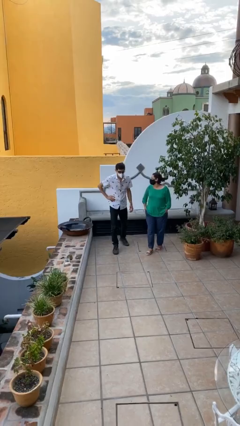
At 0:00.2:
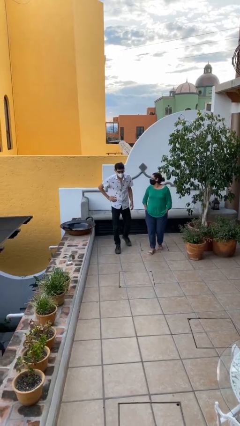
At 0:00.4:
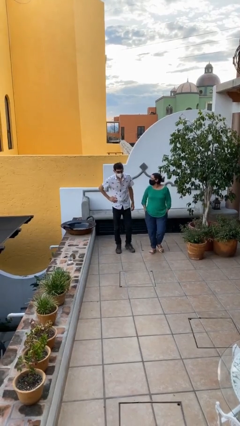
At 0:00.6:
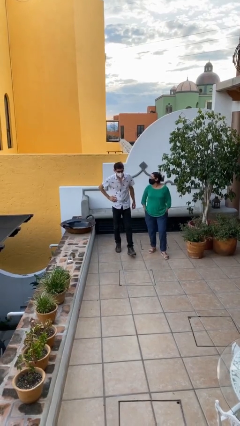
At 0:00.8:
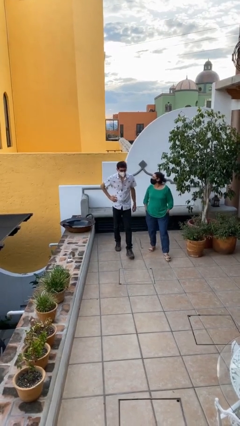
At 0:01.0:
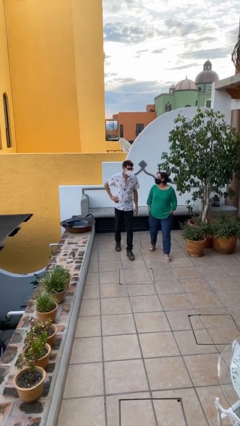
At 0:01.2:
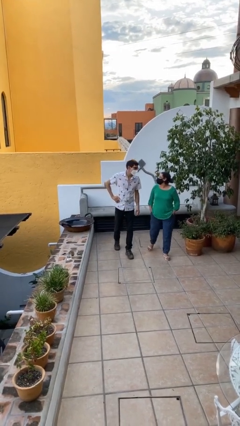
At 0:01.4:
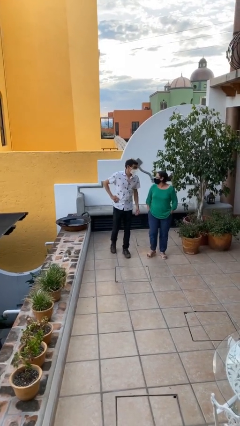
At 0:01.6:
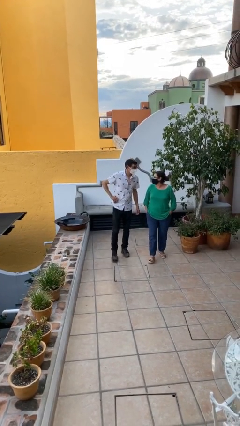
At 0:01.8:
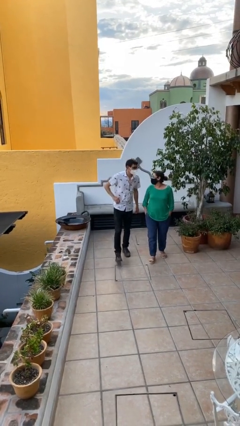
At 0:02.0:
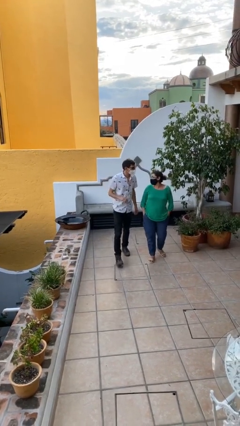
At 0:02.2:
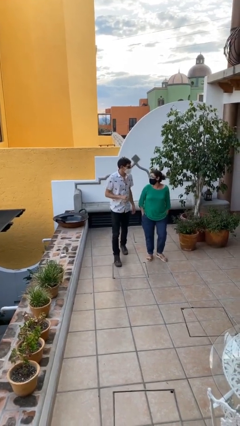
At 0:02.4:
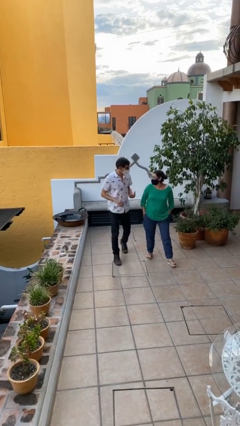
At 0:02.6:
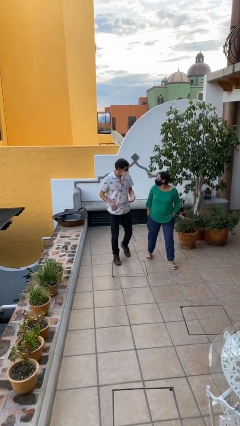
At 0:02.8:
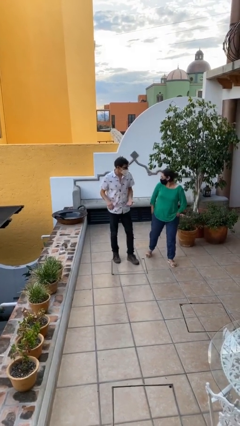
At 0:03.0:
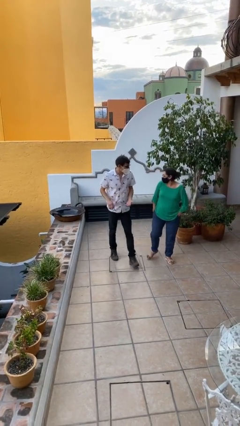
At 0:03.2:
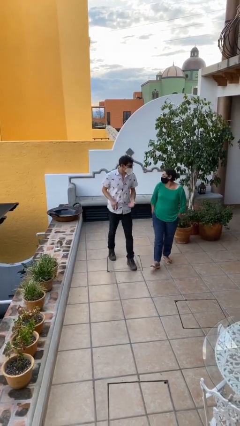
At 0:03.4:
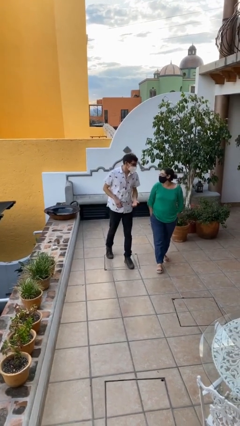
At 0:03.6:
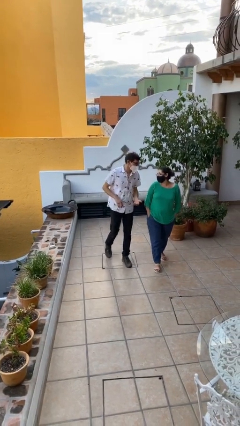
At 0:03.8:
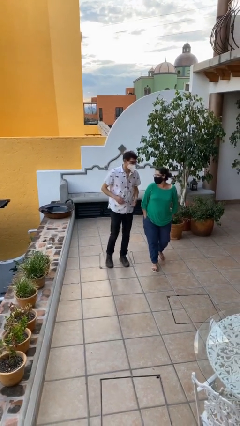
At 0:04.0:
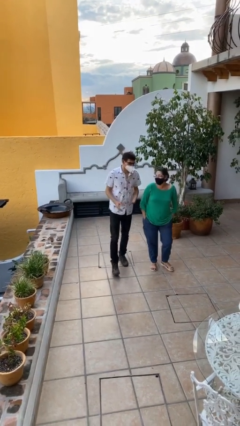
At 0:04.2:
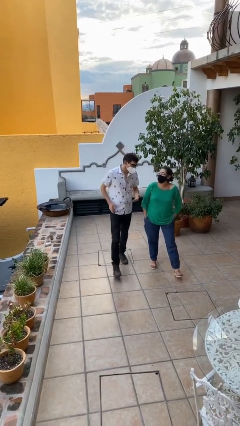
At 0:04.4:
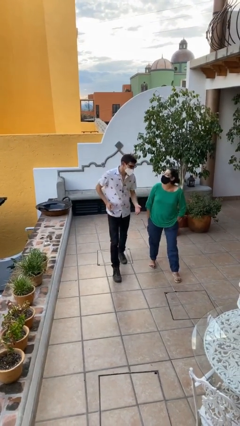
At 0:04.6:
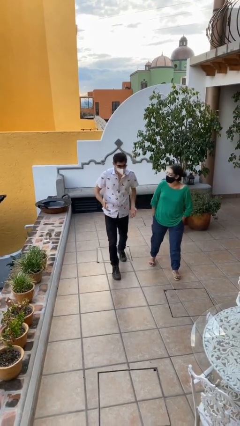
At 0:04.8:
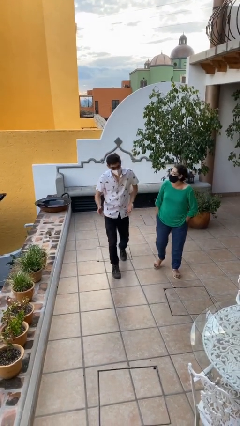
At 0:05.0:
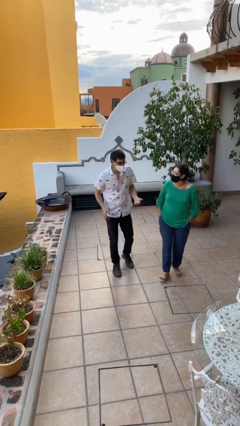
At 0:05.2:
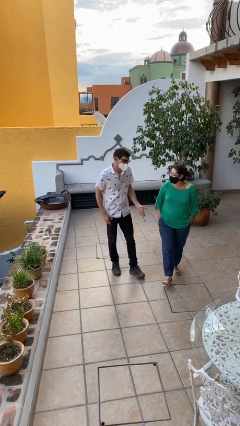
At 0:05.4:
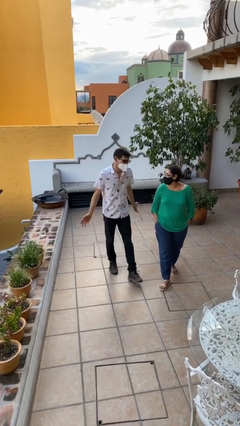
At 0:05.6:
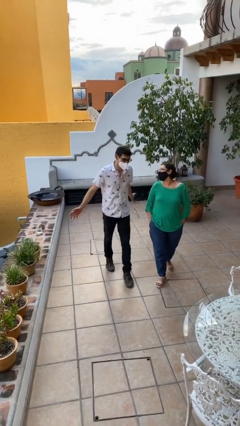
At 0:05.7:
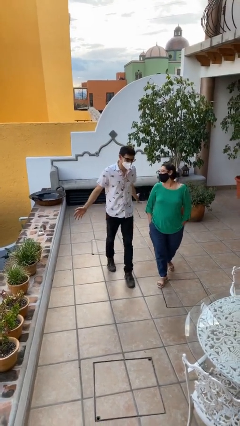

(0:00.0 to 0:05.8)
person talks to person

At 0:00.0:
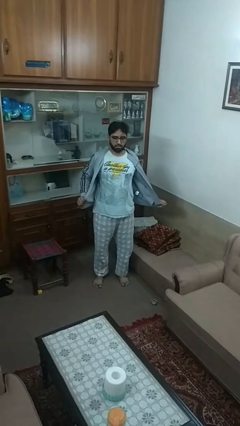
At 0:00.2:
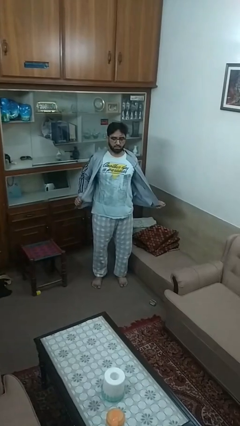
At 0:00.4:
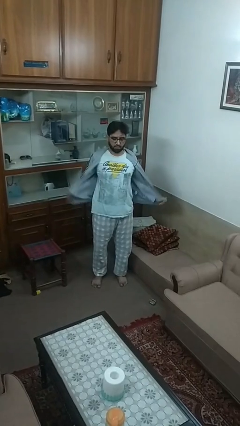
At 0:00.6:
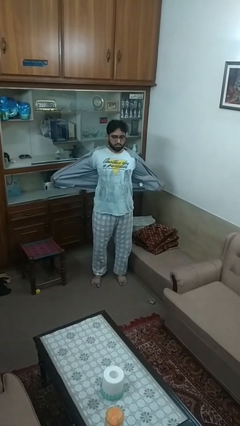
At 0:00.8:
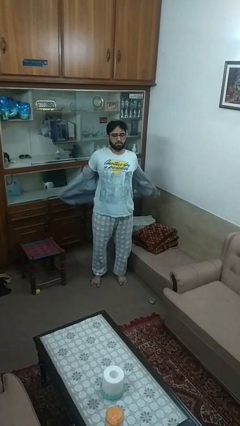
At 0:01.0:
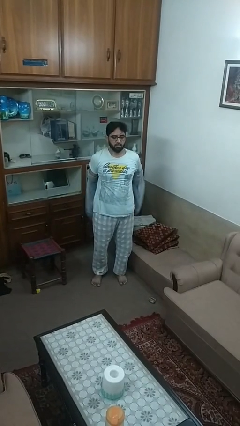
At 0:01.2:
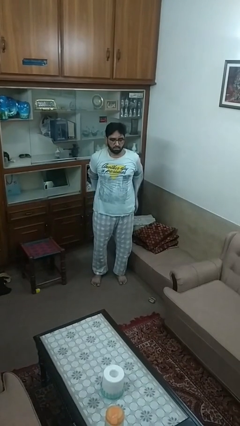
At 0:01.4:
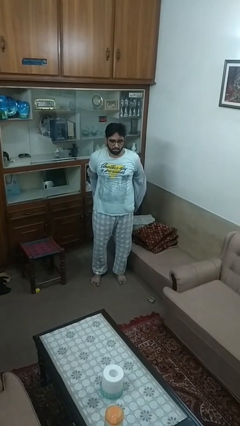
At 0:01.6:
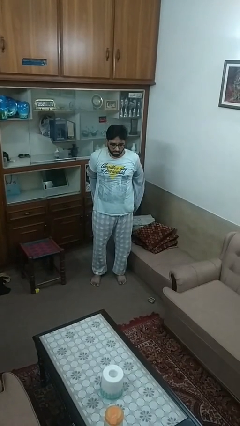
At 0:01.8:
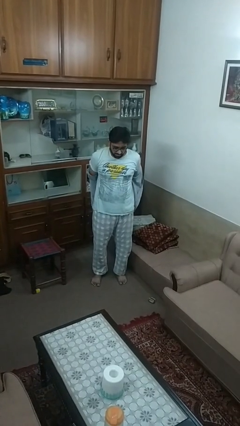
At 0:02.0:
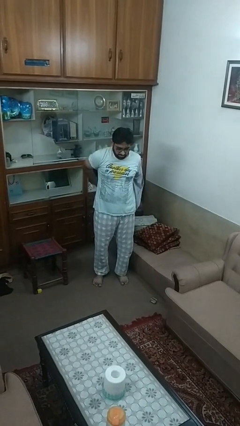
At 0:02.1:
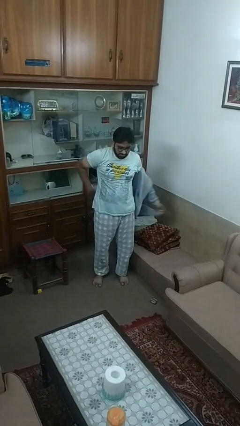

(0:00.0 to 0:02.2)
person takes off jacket

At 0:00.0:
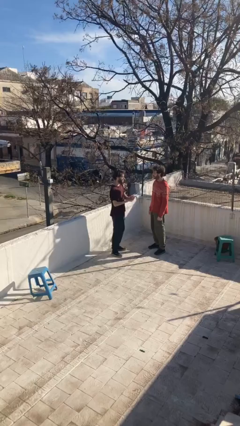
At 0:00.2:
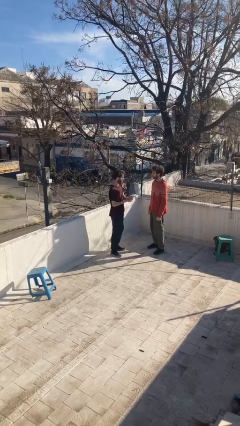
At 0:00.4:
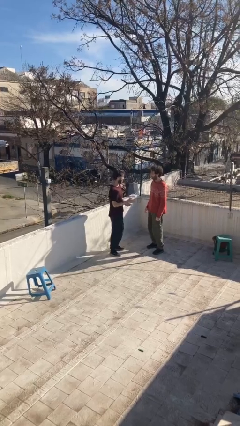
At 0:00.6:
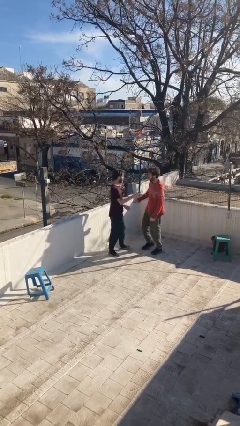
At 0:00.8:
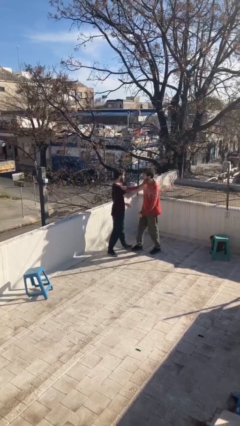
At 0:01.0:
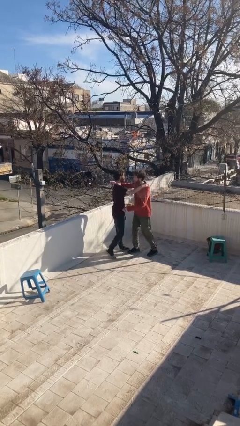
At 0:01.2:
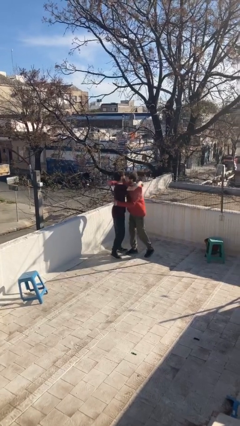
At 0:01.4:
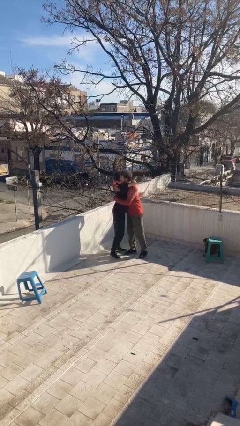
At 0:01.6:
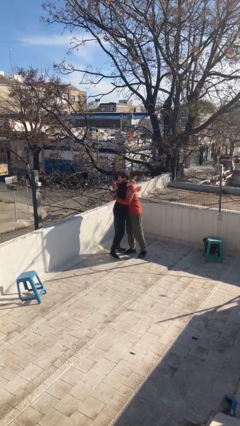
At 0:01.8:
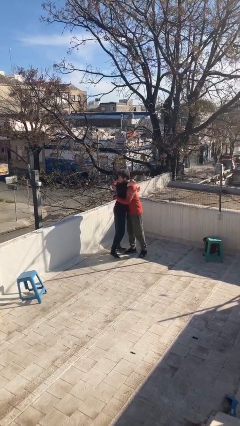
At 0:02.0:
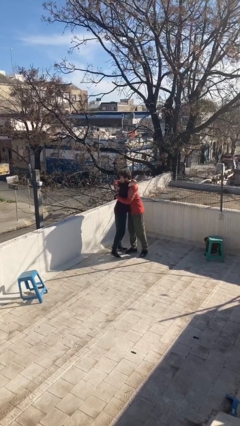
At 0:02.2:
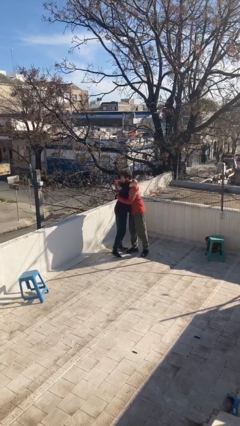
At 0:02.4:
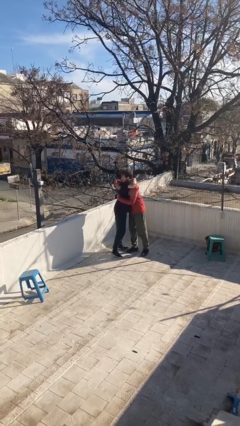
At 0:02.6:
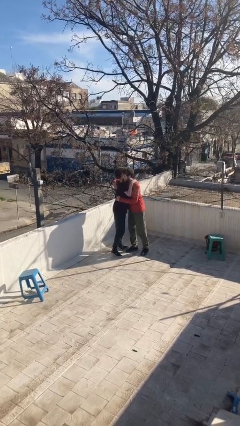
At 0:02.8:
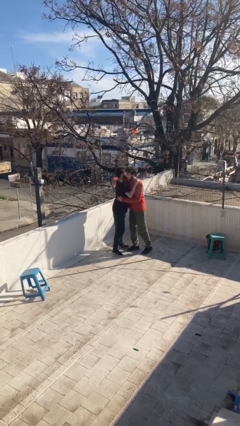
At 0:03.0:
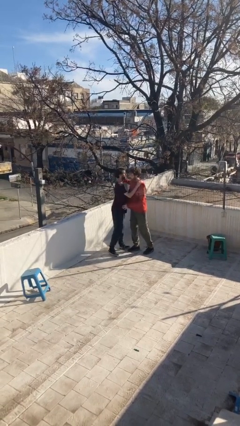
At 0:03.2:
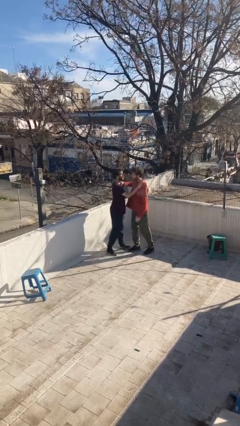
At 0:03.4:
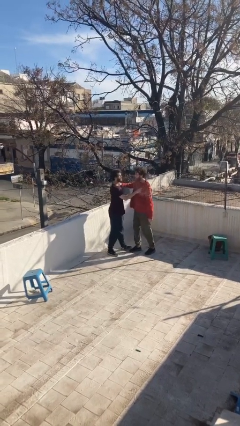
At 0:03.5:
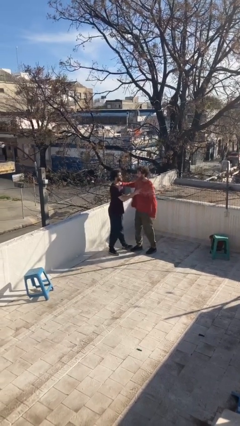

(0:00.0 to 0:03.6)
person embraces person

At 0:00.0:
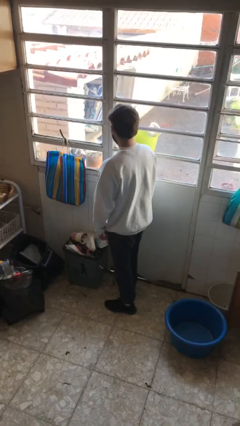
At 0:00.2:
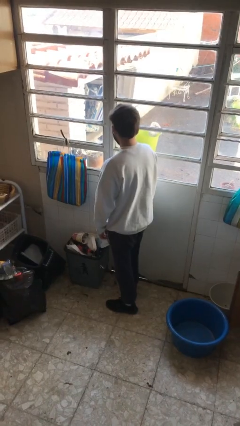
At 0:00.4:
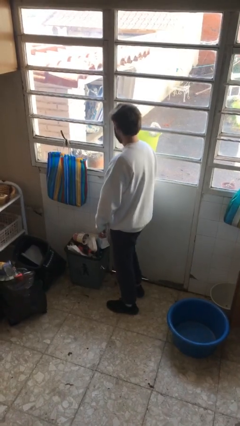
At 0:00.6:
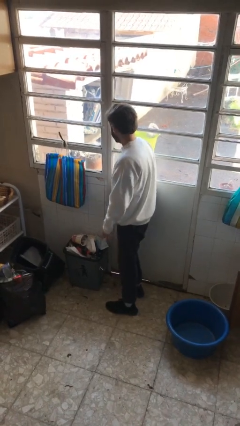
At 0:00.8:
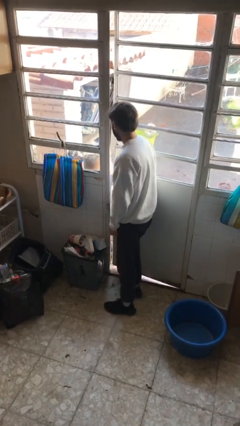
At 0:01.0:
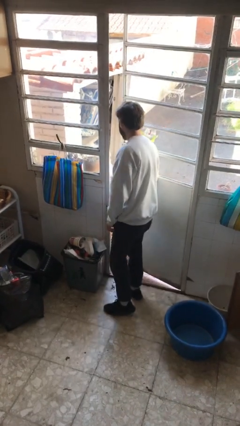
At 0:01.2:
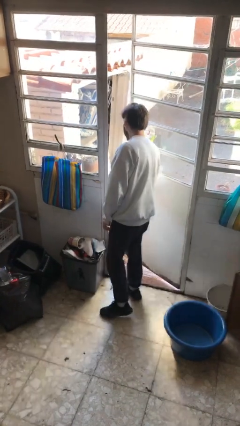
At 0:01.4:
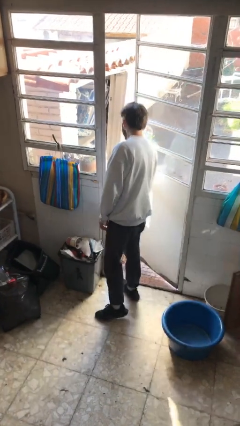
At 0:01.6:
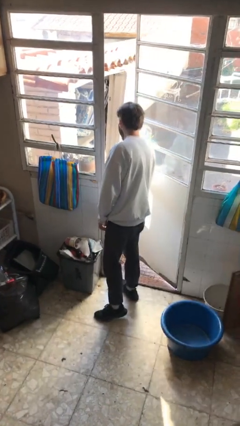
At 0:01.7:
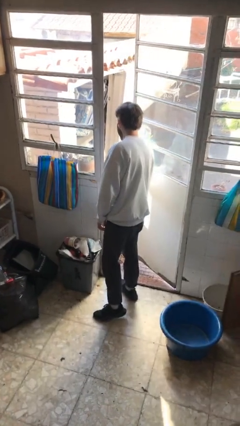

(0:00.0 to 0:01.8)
person opens facility door

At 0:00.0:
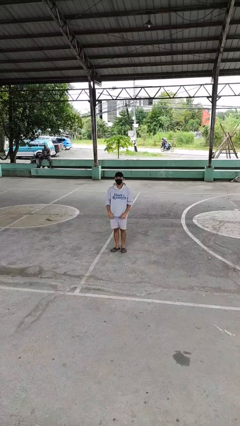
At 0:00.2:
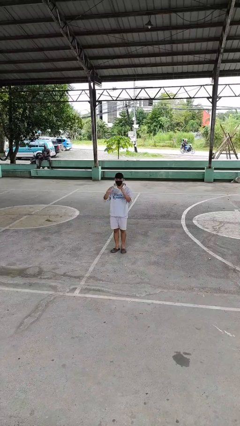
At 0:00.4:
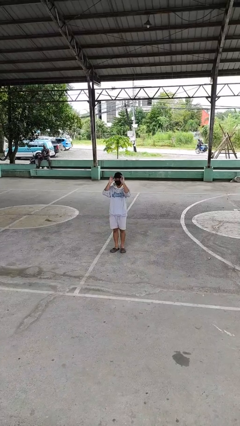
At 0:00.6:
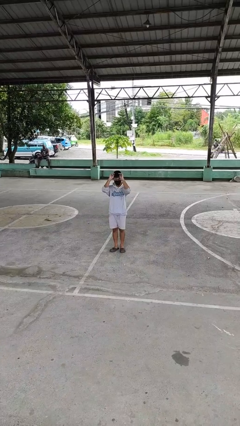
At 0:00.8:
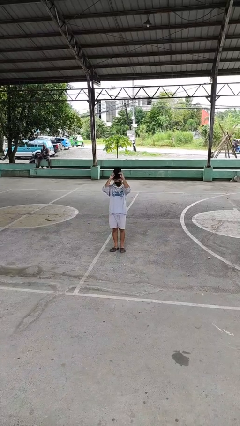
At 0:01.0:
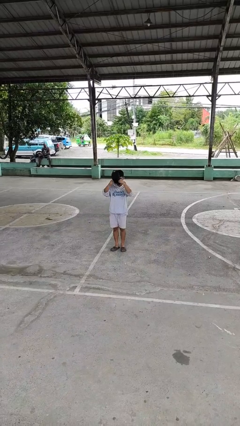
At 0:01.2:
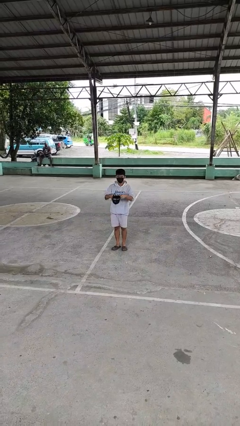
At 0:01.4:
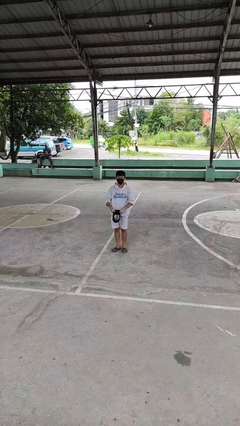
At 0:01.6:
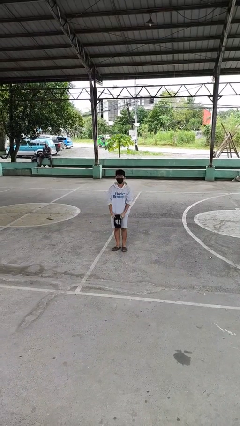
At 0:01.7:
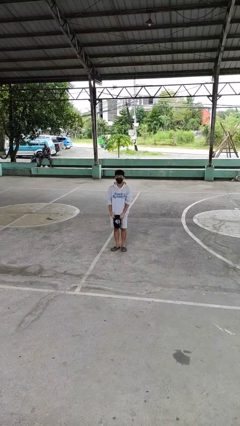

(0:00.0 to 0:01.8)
person takes off hat

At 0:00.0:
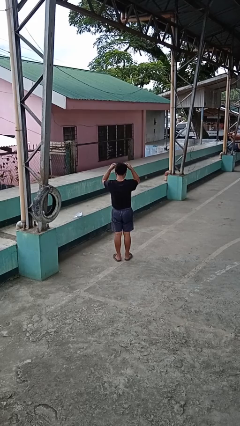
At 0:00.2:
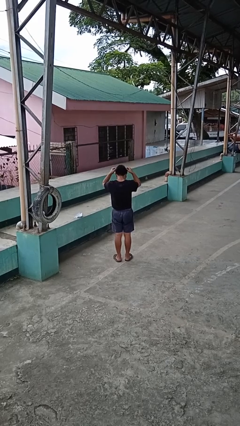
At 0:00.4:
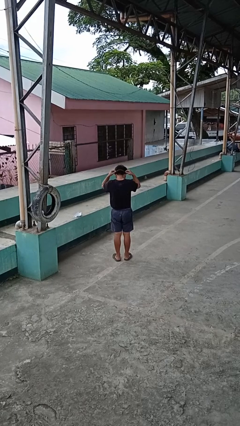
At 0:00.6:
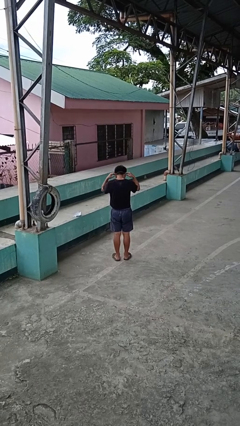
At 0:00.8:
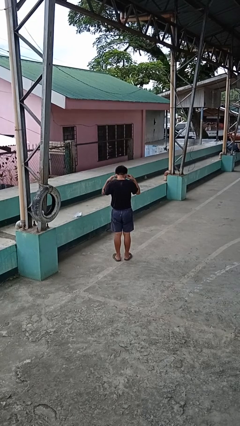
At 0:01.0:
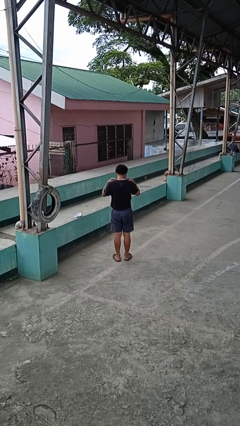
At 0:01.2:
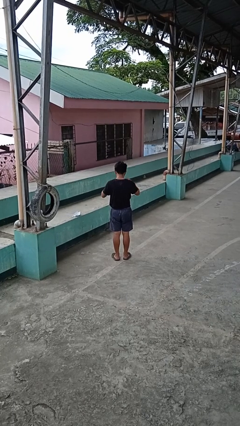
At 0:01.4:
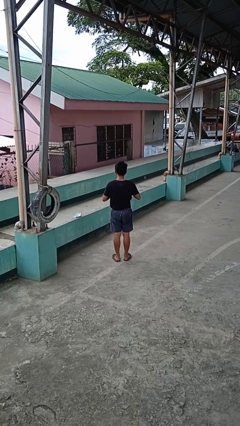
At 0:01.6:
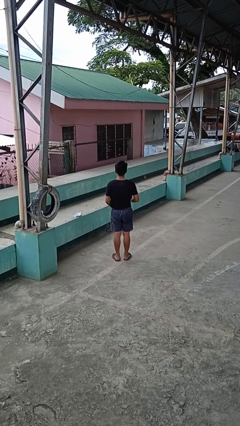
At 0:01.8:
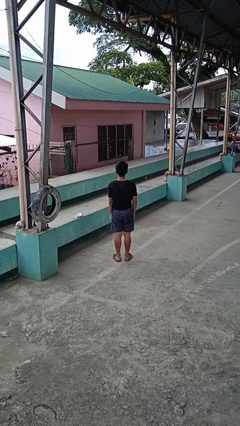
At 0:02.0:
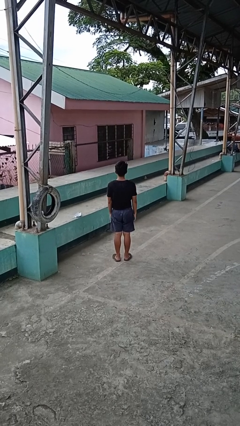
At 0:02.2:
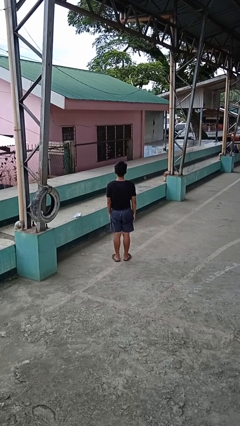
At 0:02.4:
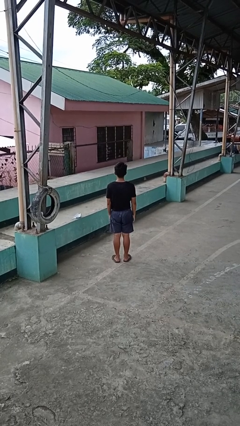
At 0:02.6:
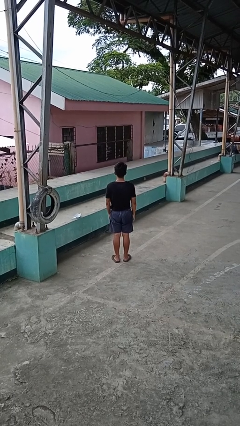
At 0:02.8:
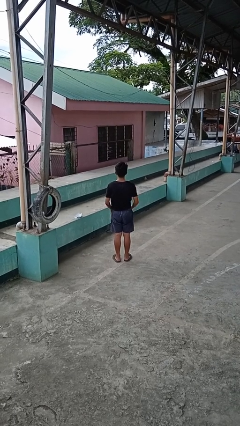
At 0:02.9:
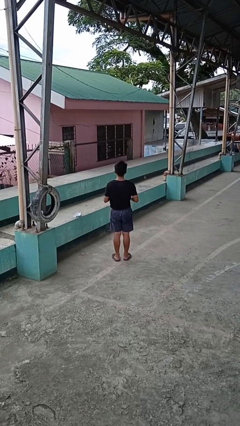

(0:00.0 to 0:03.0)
person puts on necklace
